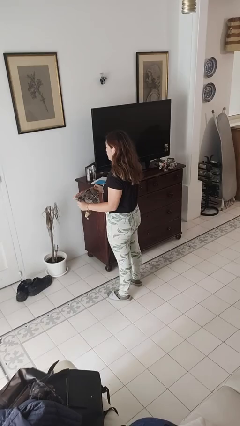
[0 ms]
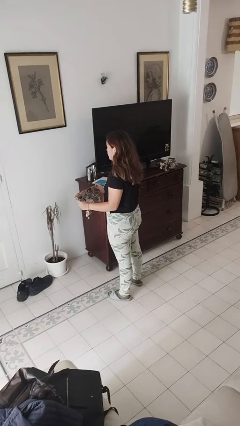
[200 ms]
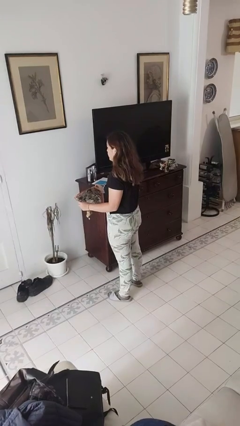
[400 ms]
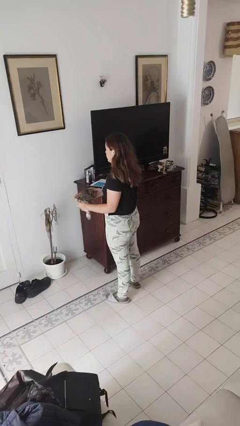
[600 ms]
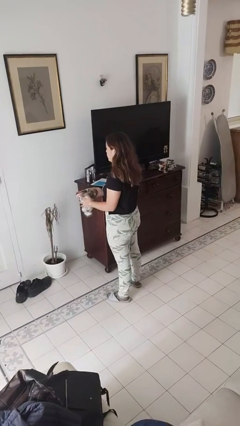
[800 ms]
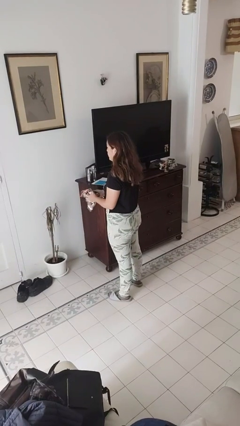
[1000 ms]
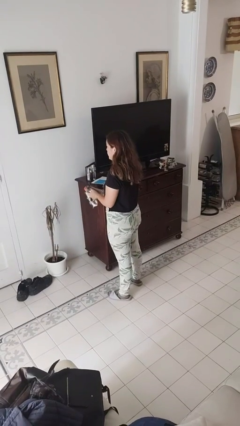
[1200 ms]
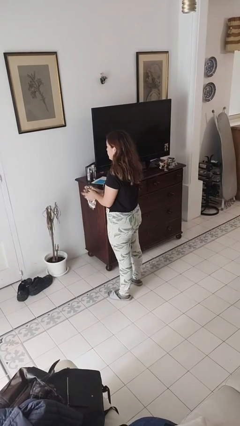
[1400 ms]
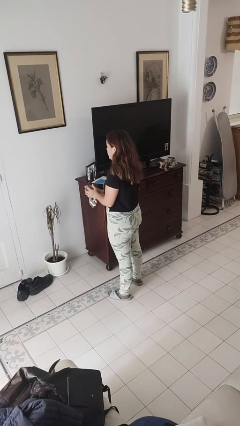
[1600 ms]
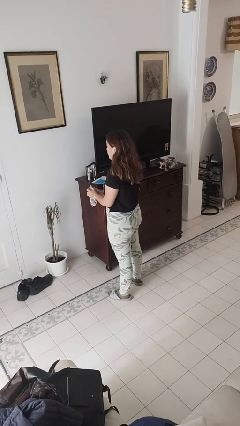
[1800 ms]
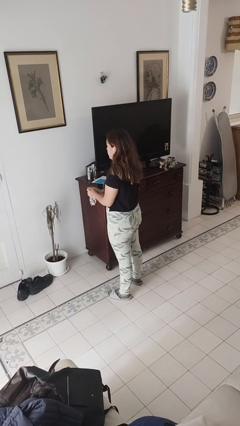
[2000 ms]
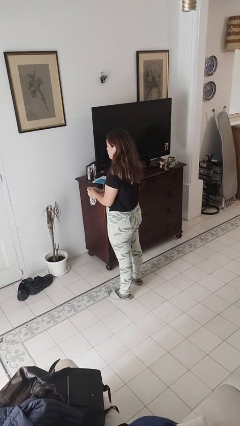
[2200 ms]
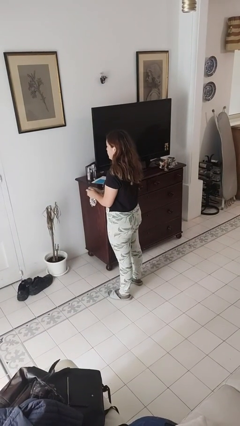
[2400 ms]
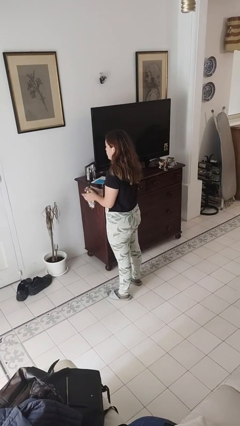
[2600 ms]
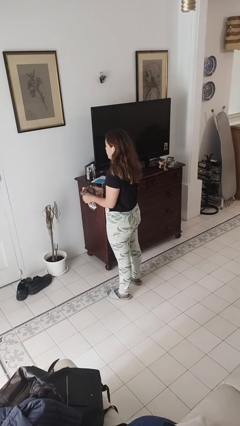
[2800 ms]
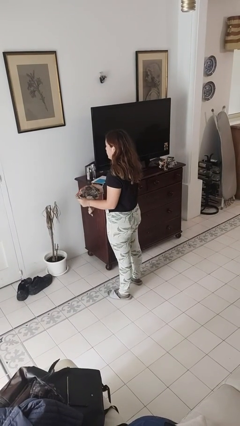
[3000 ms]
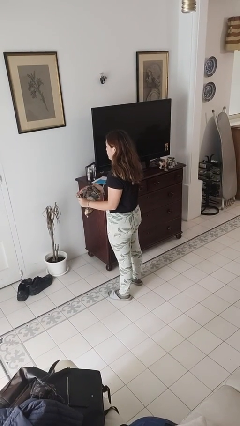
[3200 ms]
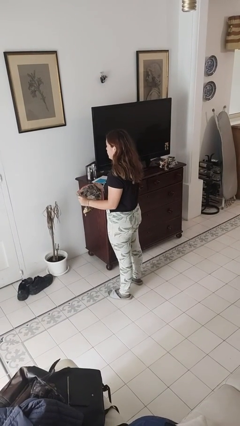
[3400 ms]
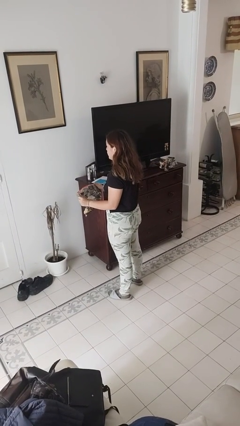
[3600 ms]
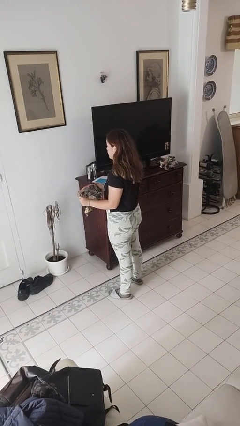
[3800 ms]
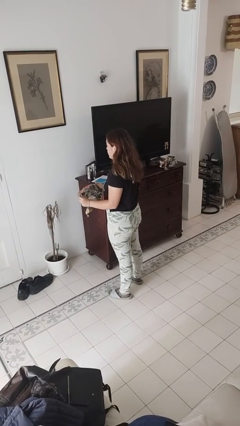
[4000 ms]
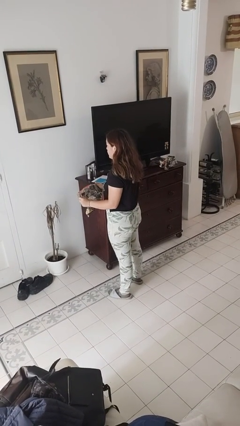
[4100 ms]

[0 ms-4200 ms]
person crumples paper

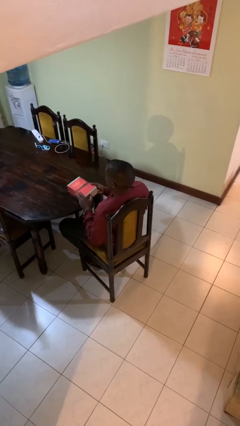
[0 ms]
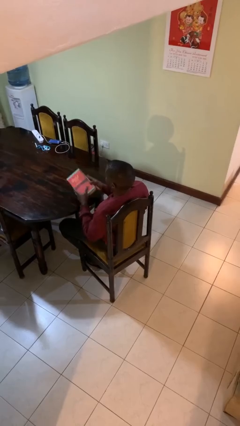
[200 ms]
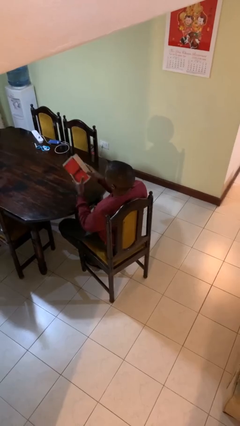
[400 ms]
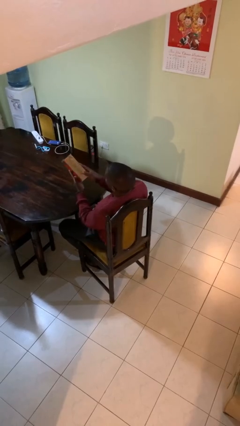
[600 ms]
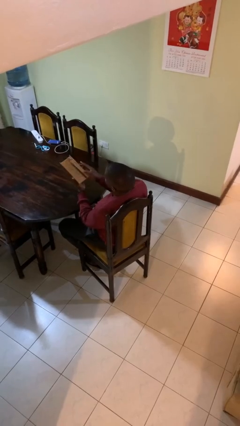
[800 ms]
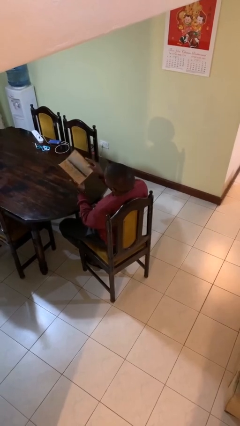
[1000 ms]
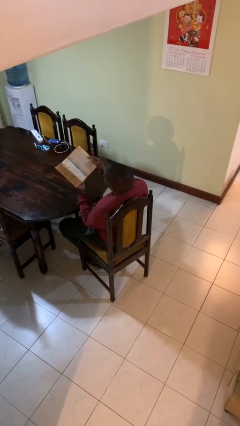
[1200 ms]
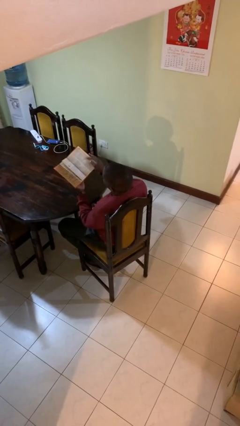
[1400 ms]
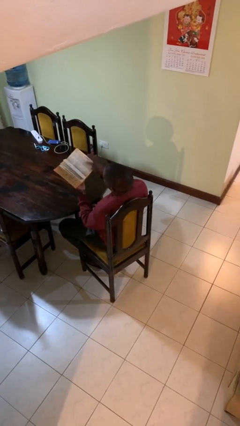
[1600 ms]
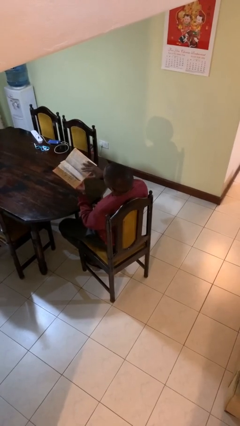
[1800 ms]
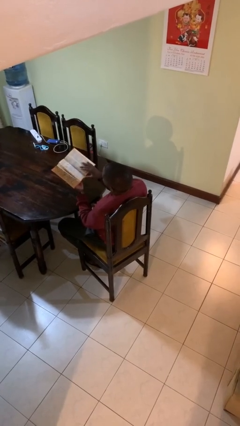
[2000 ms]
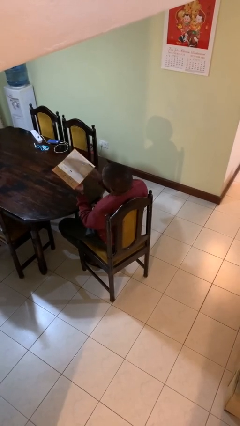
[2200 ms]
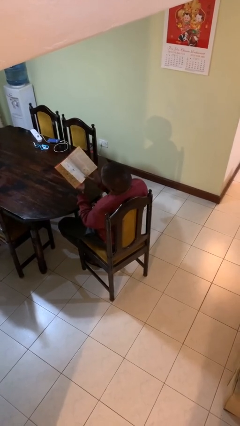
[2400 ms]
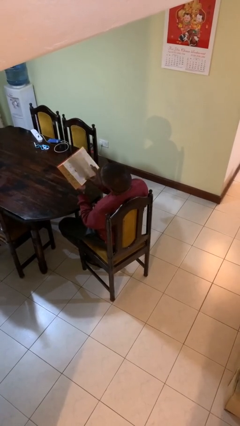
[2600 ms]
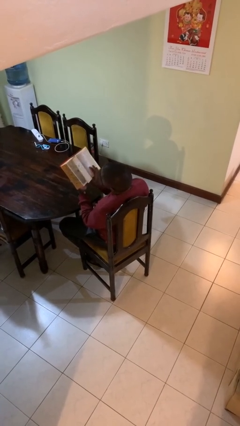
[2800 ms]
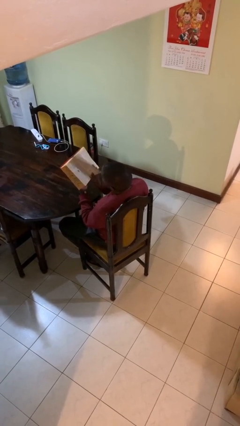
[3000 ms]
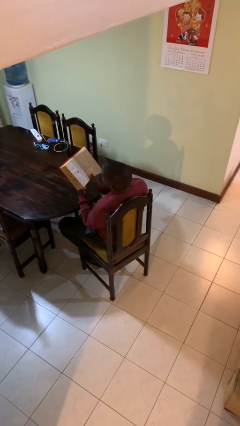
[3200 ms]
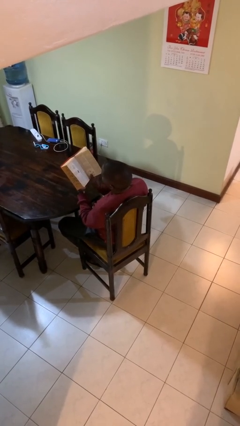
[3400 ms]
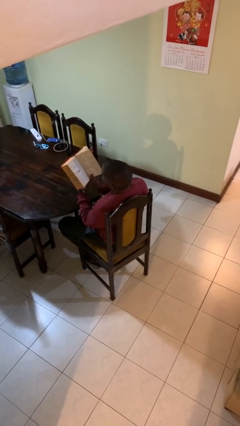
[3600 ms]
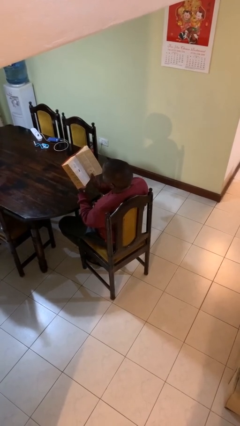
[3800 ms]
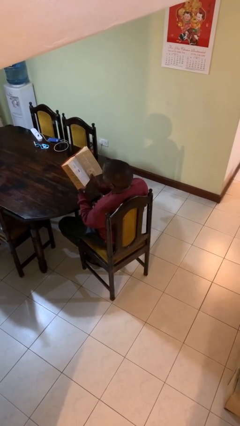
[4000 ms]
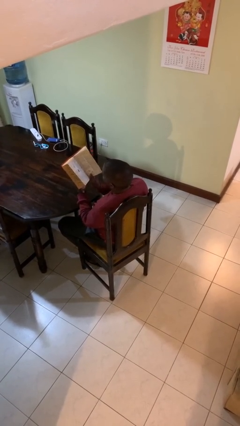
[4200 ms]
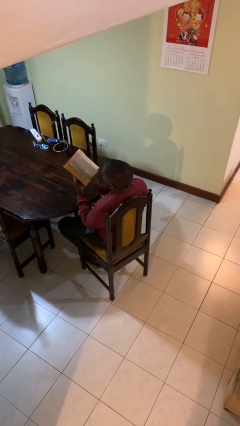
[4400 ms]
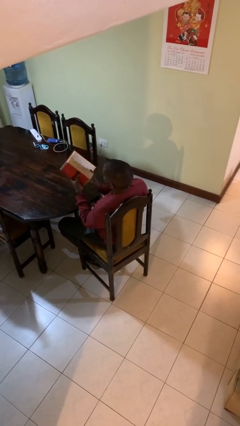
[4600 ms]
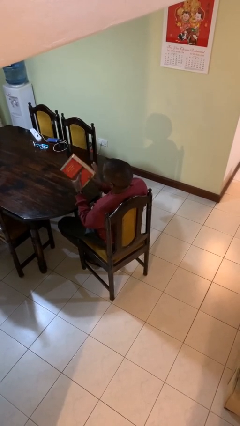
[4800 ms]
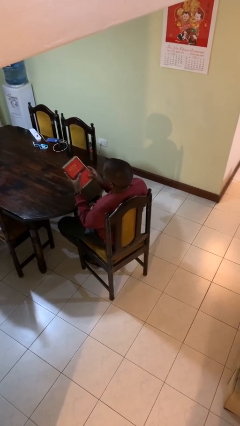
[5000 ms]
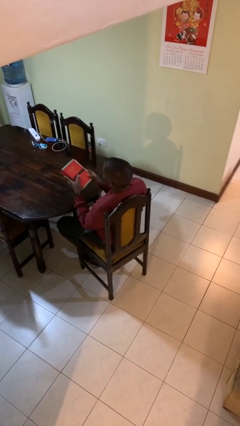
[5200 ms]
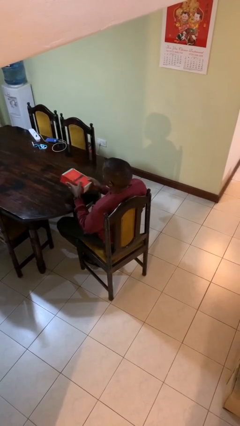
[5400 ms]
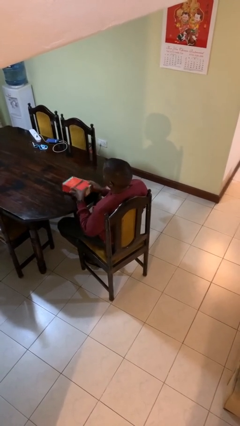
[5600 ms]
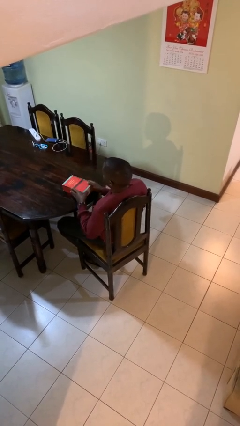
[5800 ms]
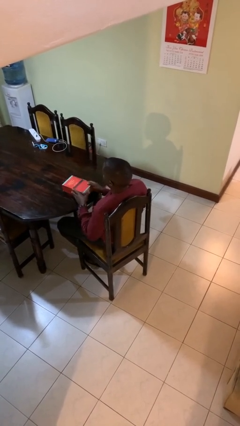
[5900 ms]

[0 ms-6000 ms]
person reads book

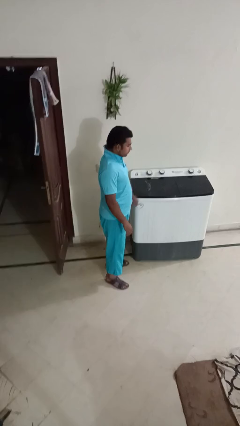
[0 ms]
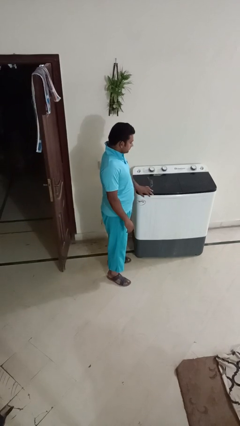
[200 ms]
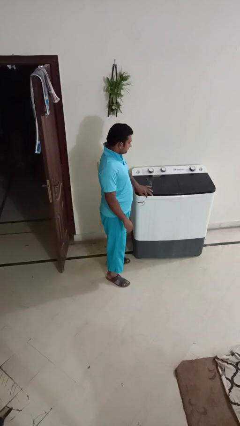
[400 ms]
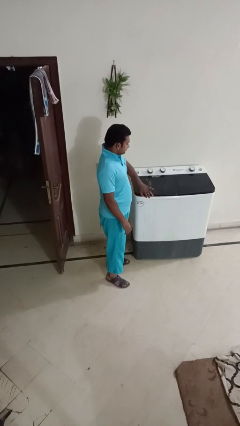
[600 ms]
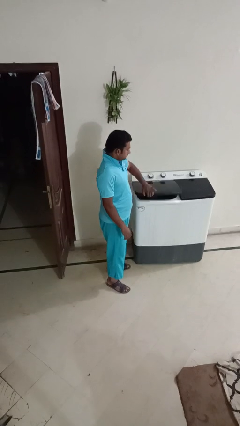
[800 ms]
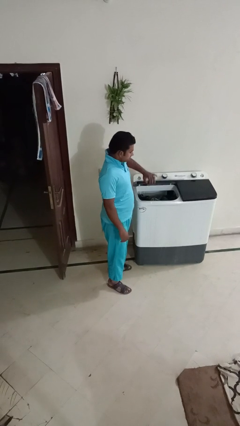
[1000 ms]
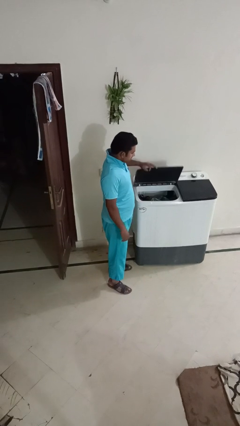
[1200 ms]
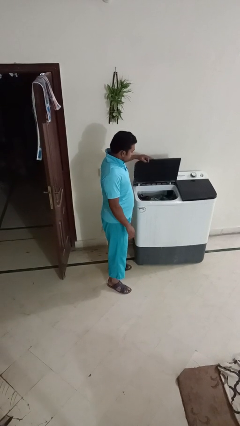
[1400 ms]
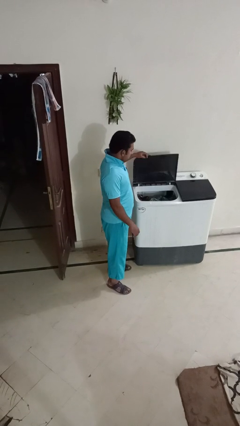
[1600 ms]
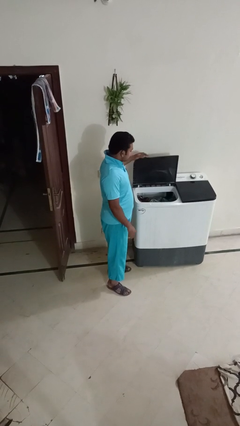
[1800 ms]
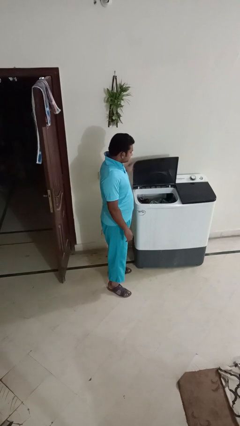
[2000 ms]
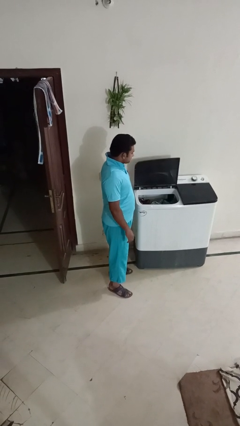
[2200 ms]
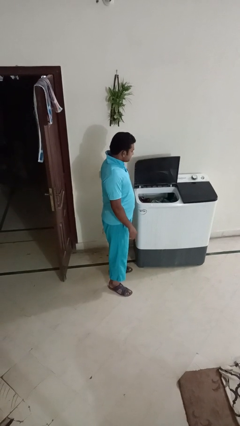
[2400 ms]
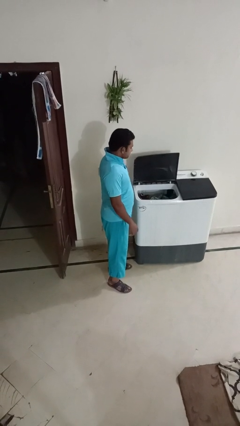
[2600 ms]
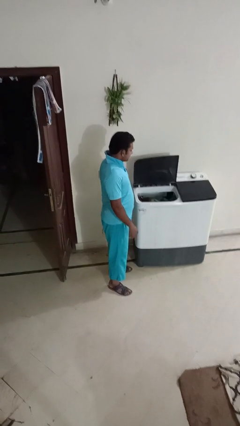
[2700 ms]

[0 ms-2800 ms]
person opens clothes washer

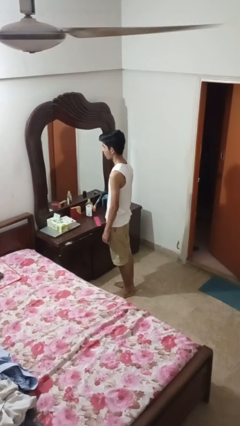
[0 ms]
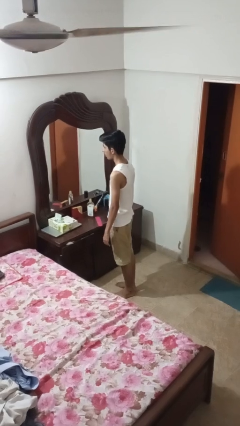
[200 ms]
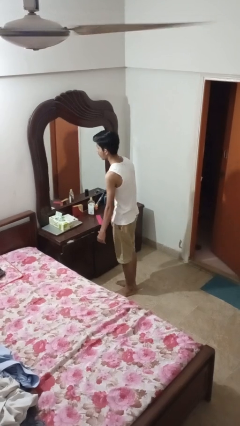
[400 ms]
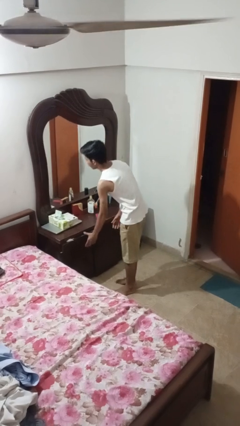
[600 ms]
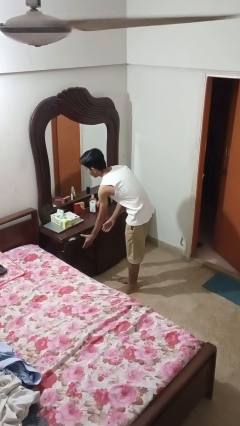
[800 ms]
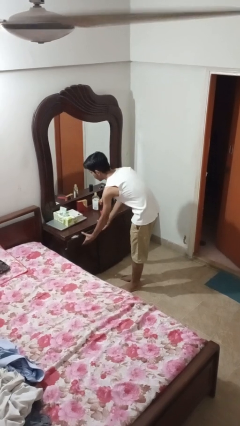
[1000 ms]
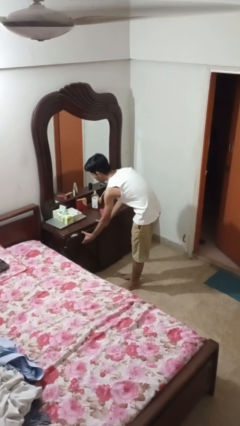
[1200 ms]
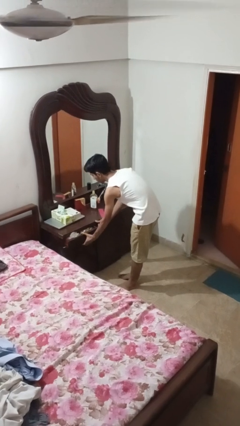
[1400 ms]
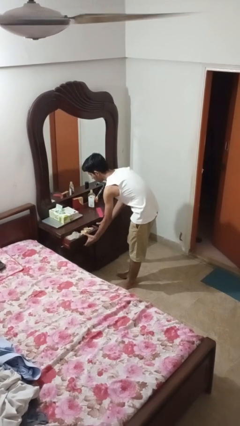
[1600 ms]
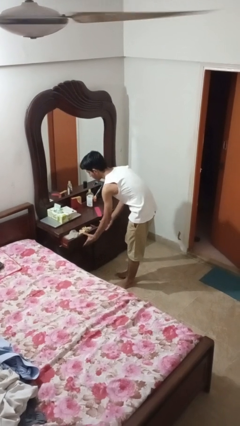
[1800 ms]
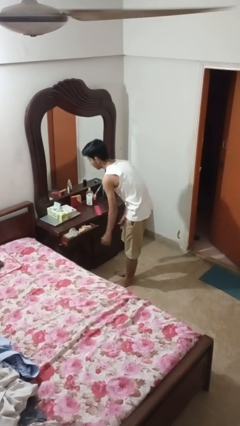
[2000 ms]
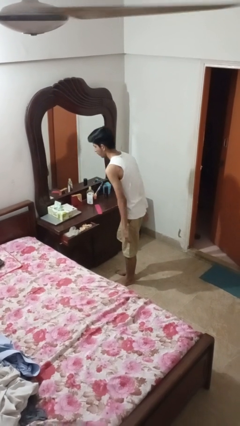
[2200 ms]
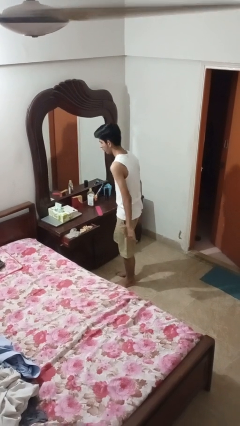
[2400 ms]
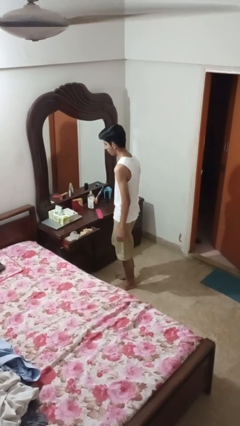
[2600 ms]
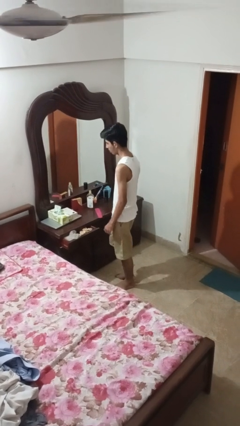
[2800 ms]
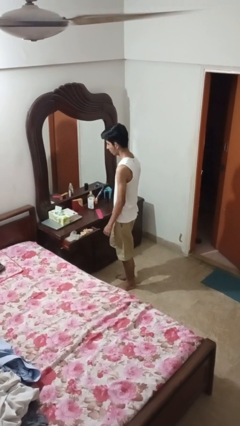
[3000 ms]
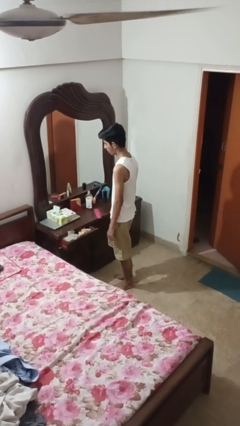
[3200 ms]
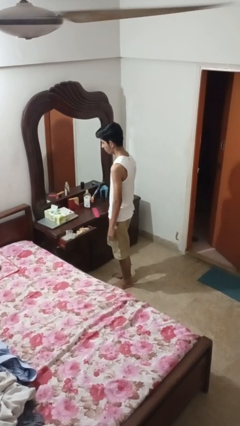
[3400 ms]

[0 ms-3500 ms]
person opens dresser drawer

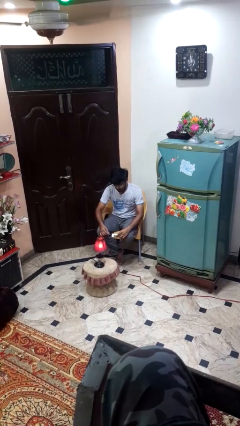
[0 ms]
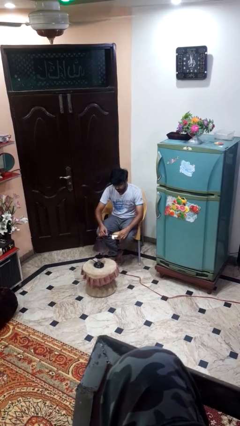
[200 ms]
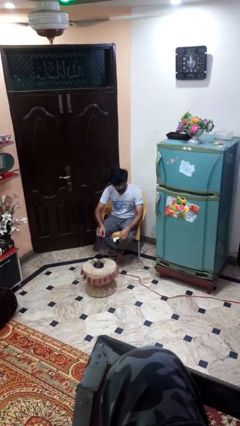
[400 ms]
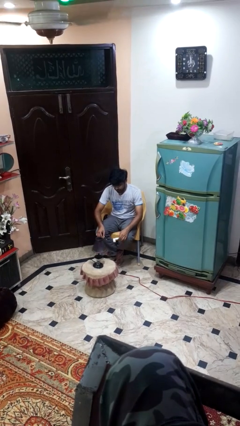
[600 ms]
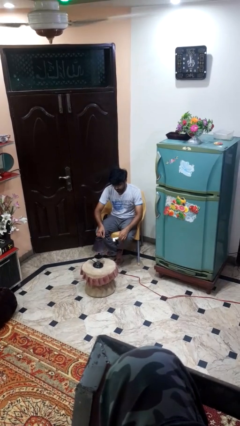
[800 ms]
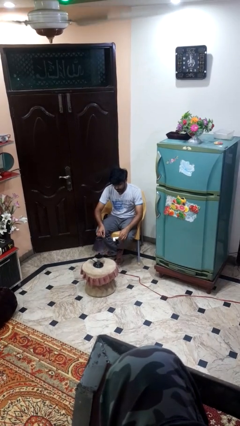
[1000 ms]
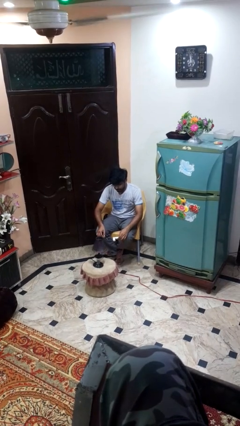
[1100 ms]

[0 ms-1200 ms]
person turns off lamp
